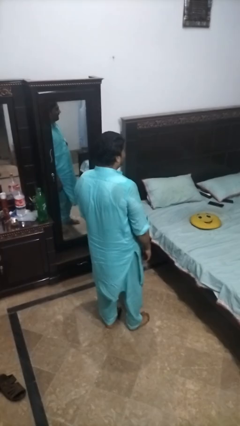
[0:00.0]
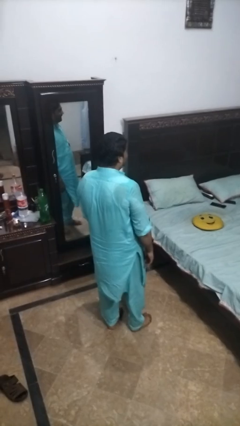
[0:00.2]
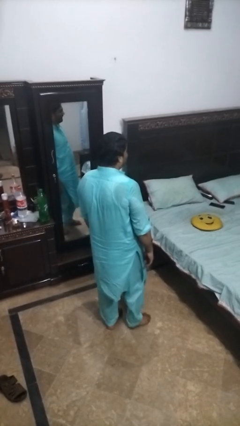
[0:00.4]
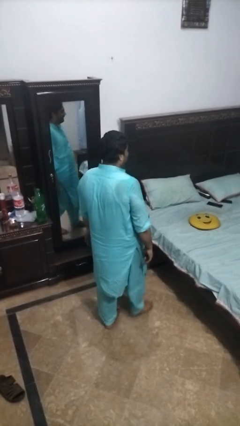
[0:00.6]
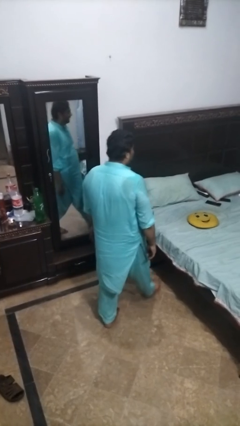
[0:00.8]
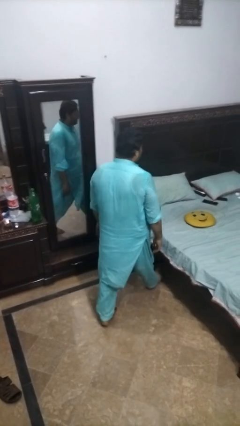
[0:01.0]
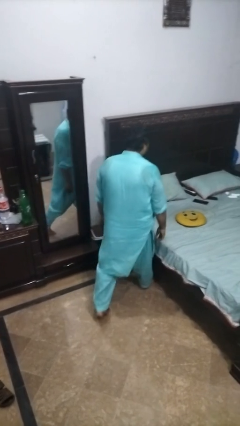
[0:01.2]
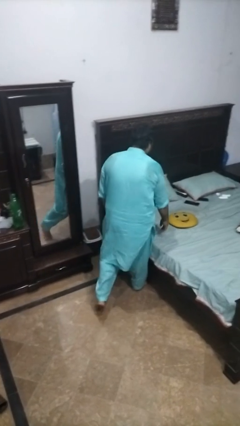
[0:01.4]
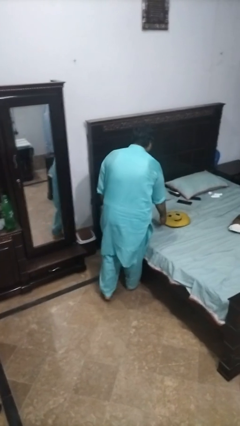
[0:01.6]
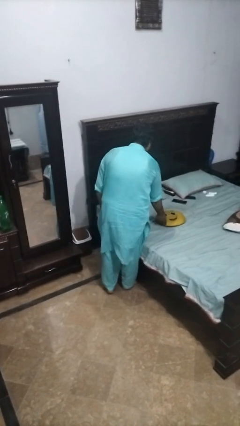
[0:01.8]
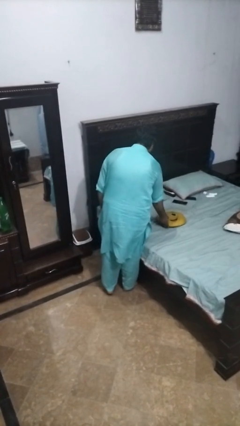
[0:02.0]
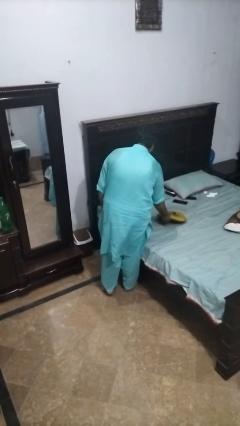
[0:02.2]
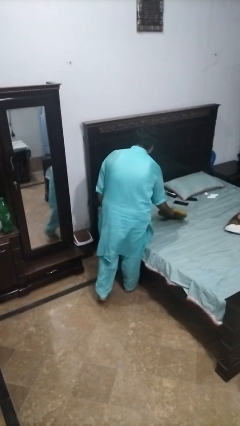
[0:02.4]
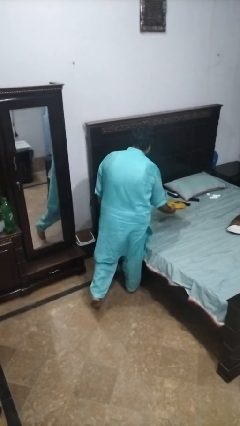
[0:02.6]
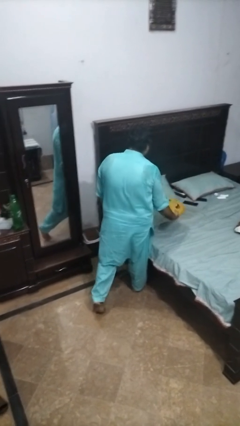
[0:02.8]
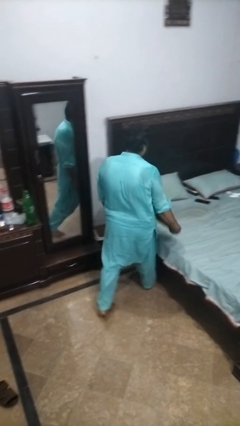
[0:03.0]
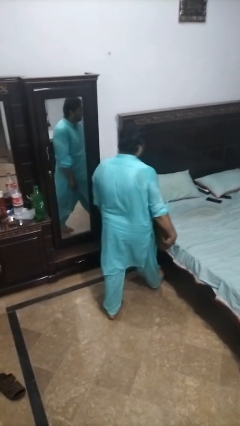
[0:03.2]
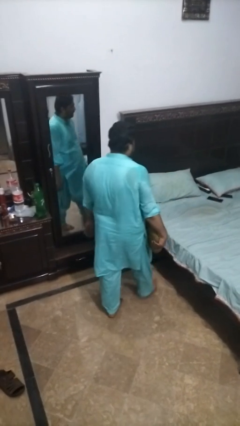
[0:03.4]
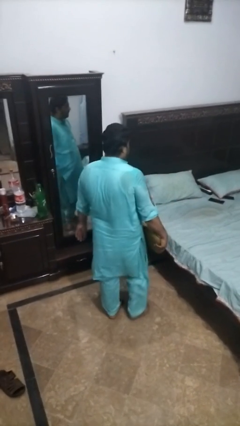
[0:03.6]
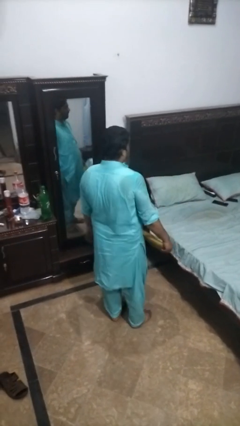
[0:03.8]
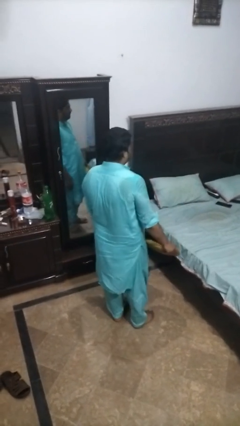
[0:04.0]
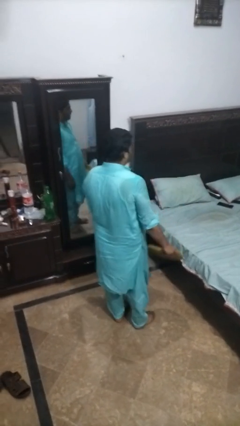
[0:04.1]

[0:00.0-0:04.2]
person picks up object from bed

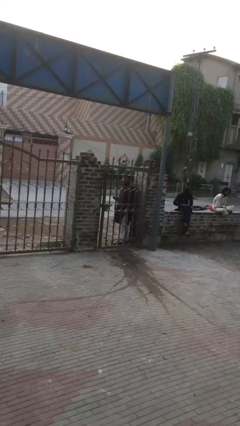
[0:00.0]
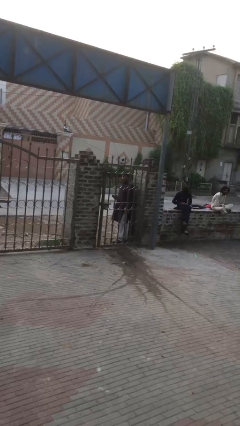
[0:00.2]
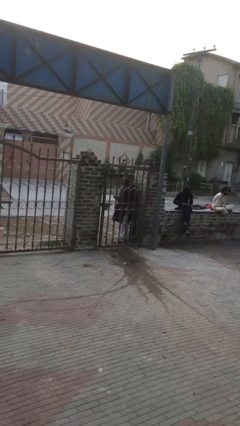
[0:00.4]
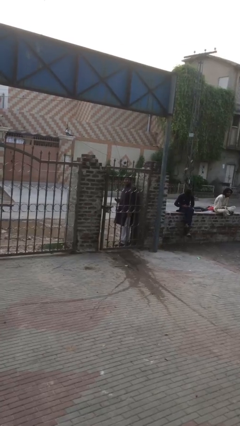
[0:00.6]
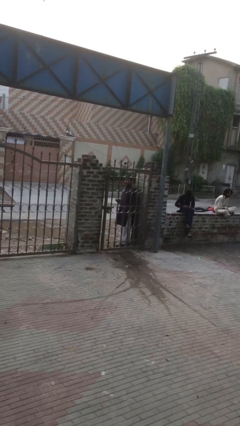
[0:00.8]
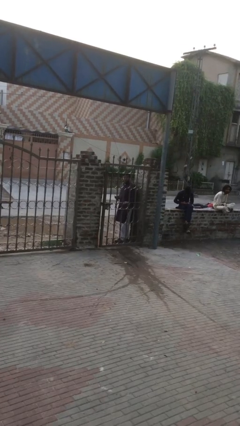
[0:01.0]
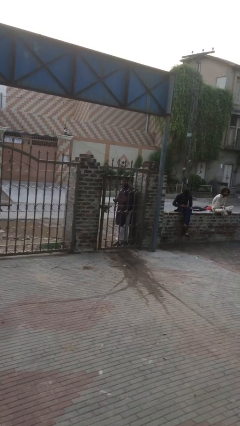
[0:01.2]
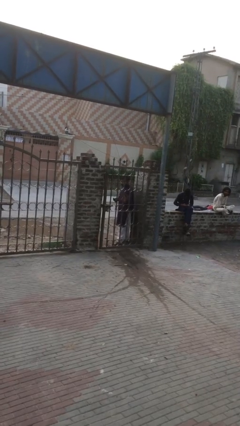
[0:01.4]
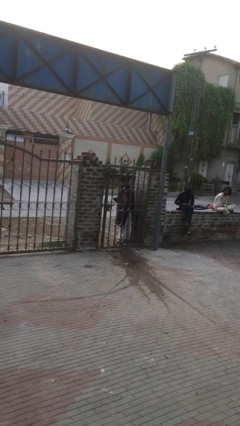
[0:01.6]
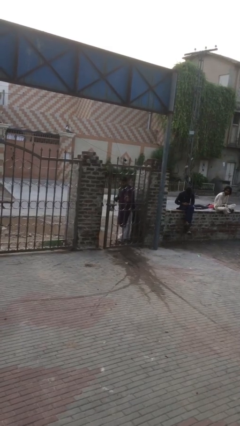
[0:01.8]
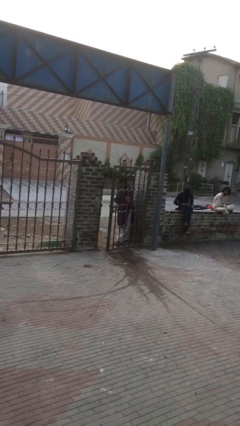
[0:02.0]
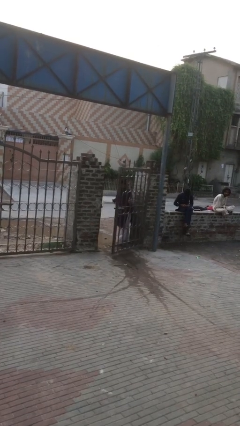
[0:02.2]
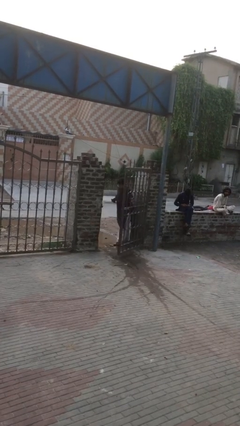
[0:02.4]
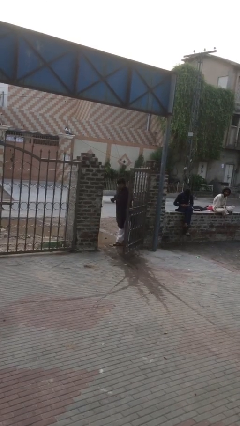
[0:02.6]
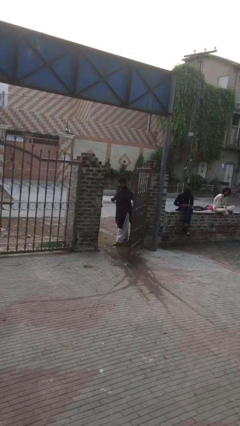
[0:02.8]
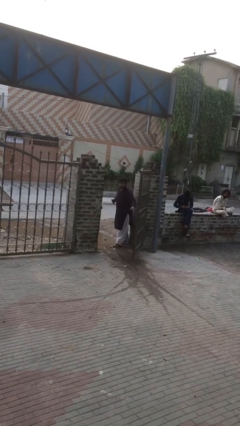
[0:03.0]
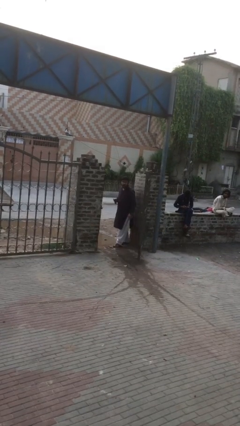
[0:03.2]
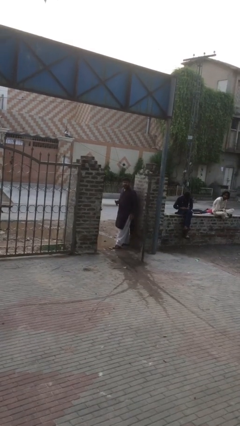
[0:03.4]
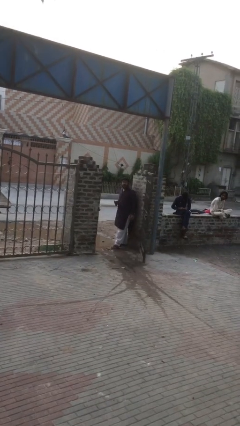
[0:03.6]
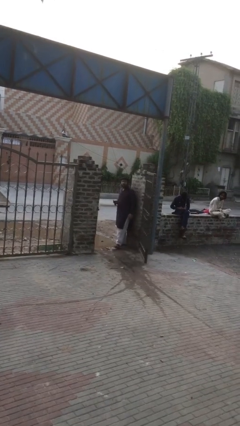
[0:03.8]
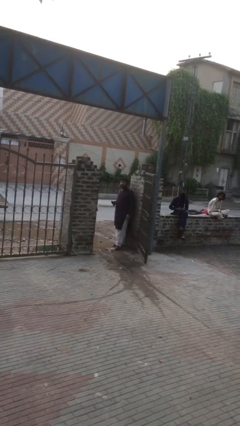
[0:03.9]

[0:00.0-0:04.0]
person opens facility door

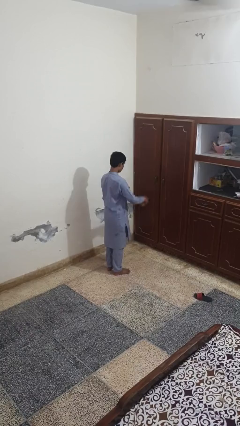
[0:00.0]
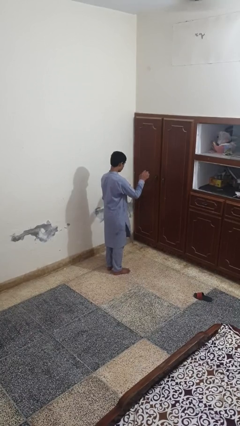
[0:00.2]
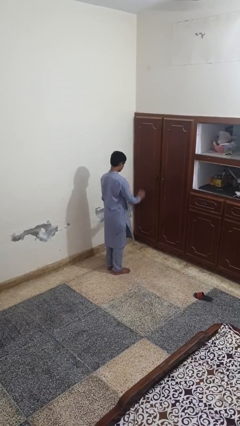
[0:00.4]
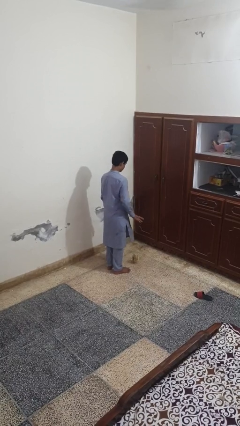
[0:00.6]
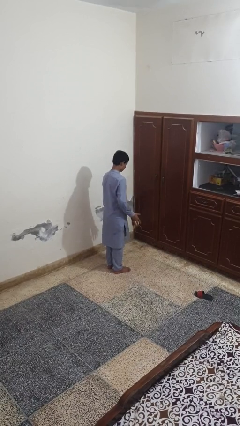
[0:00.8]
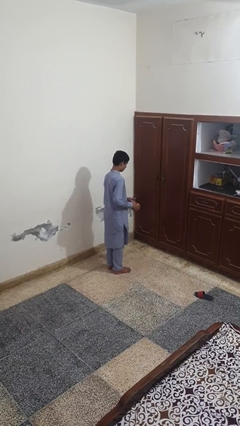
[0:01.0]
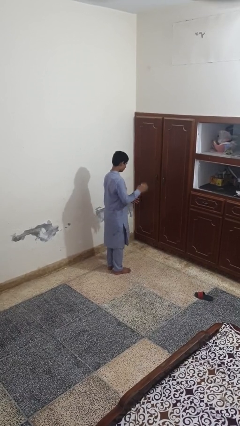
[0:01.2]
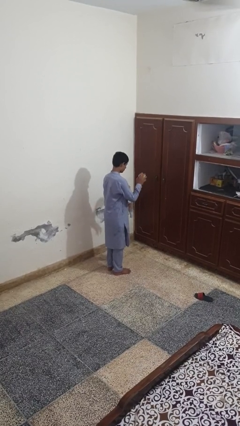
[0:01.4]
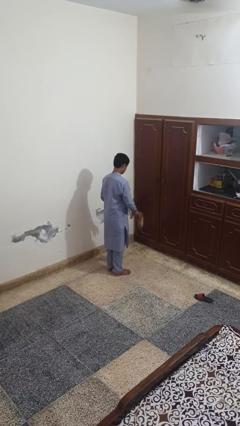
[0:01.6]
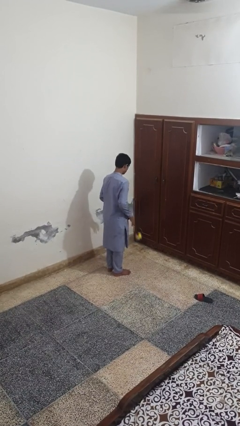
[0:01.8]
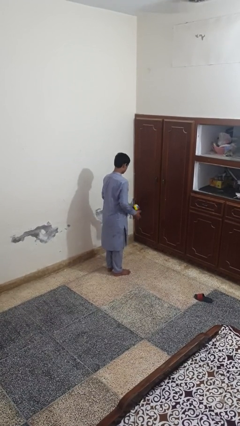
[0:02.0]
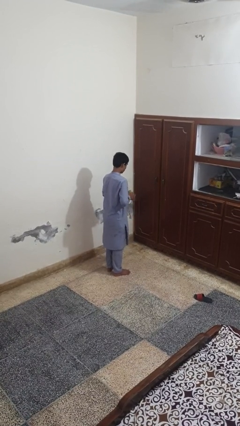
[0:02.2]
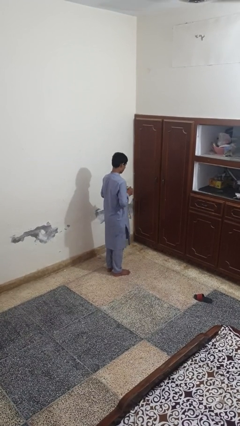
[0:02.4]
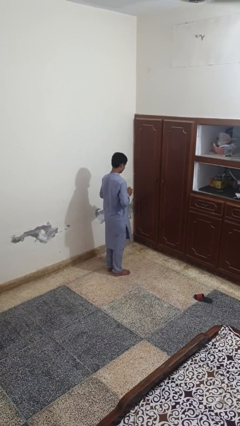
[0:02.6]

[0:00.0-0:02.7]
person bounces ball on floor

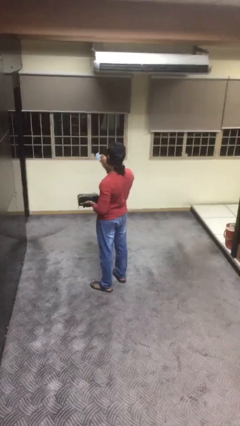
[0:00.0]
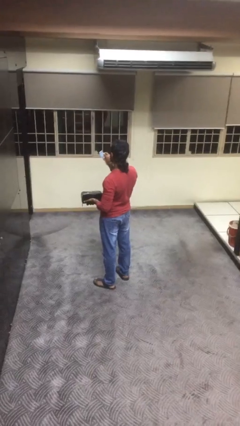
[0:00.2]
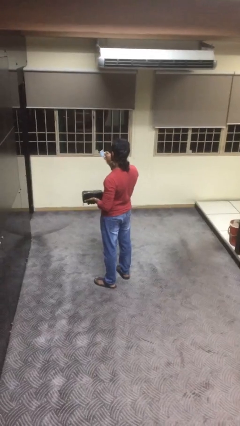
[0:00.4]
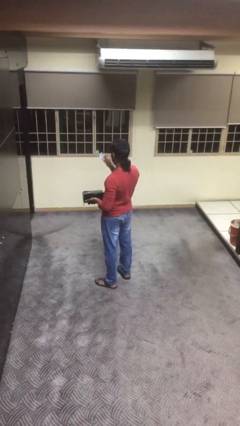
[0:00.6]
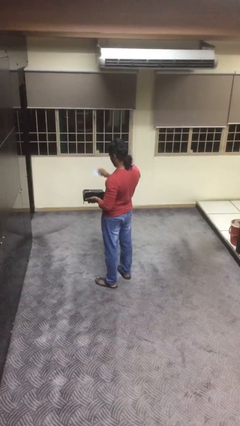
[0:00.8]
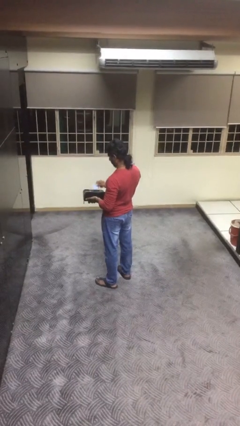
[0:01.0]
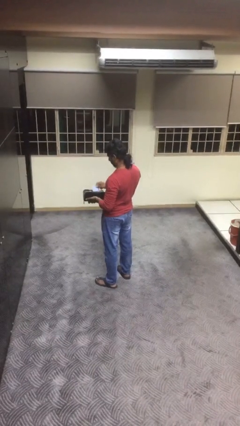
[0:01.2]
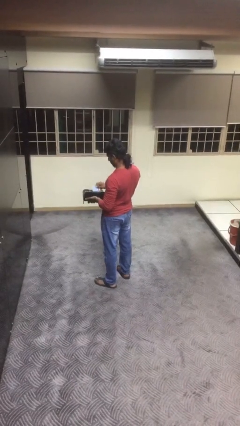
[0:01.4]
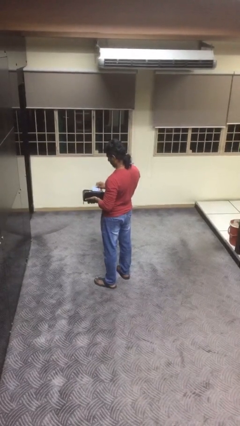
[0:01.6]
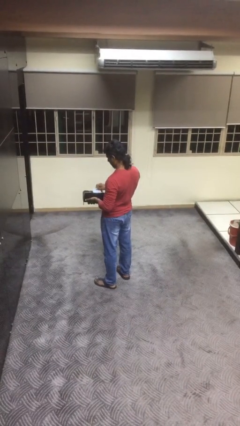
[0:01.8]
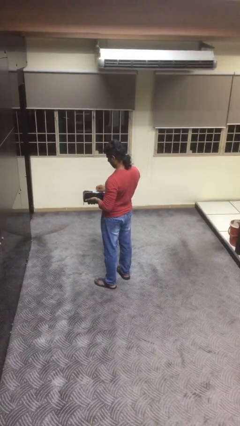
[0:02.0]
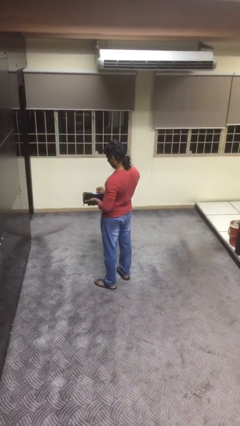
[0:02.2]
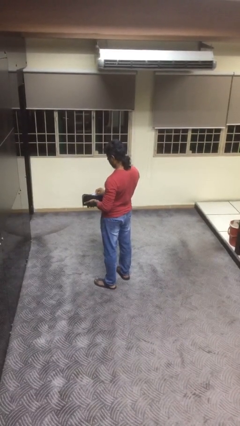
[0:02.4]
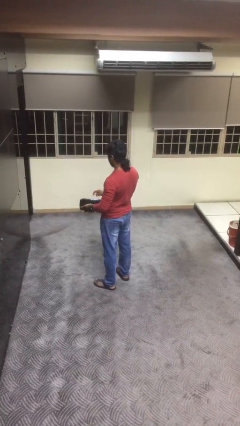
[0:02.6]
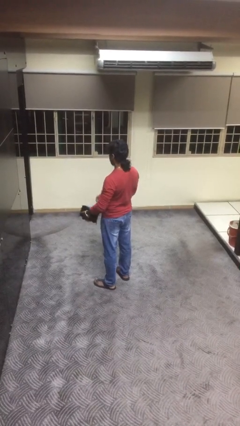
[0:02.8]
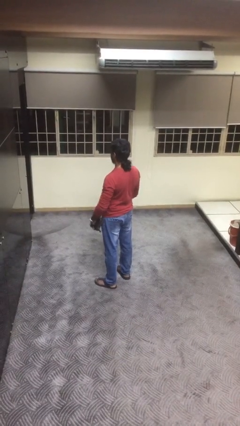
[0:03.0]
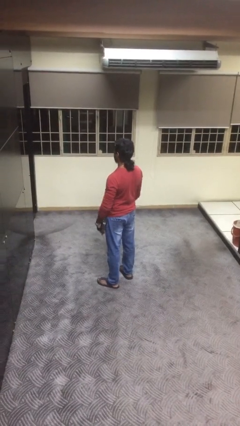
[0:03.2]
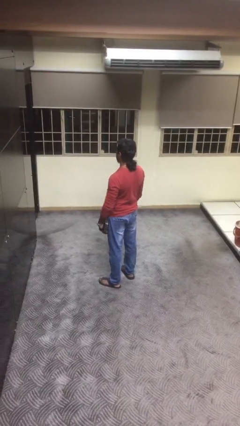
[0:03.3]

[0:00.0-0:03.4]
person puts object into purse

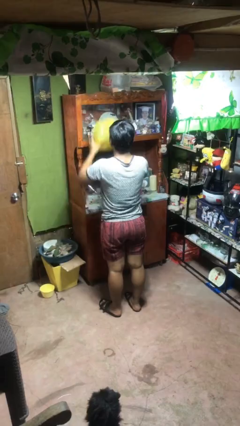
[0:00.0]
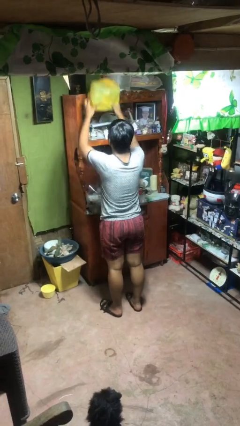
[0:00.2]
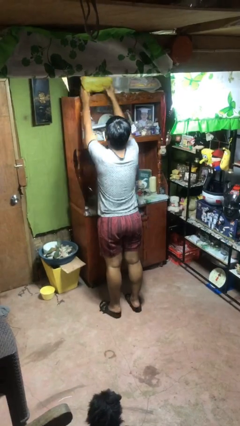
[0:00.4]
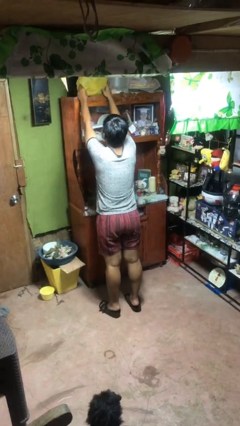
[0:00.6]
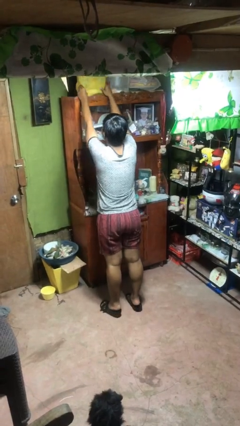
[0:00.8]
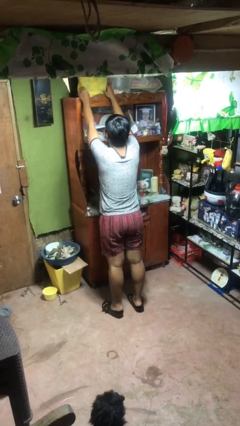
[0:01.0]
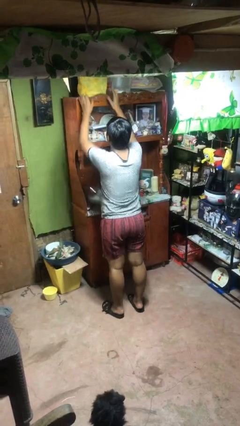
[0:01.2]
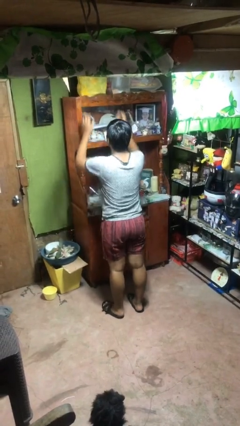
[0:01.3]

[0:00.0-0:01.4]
person puts down object on shelf

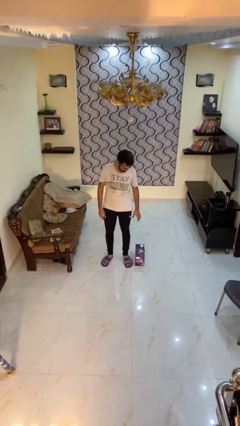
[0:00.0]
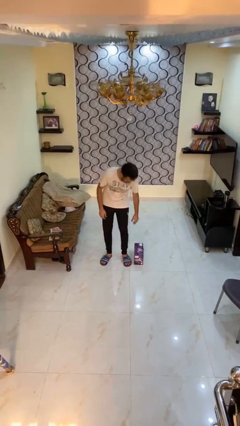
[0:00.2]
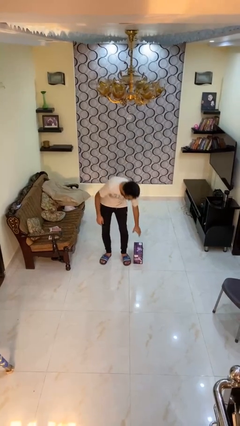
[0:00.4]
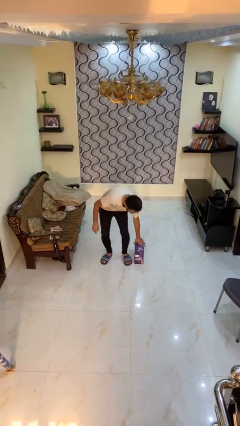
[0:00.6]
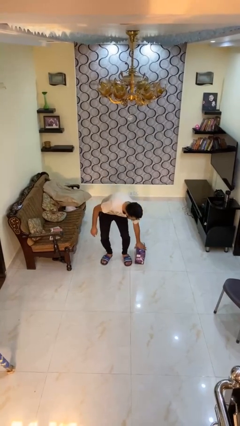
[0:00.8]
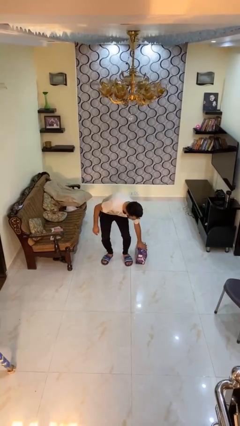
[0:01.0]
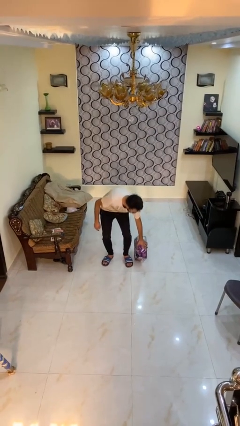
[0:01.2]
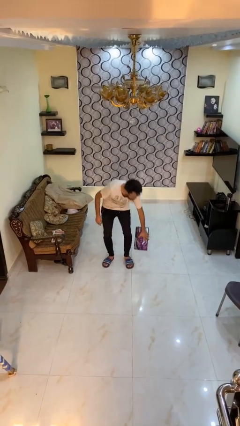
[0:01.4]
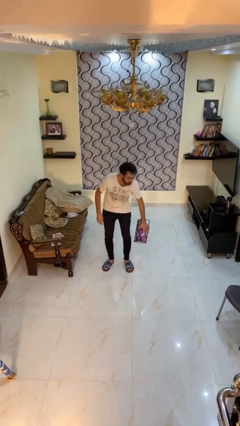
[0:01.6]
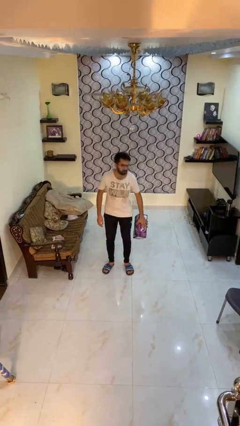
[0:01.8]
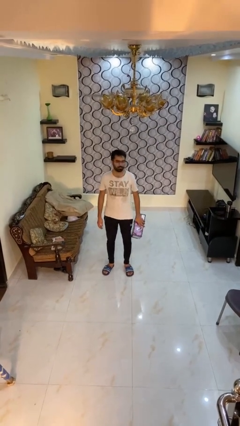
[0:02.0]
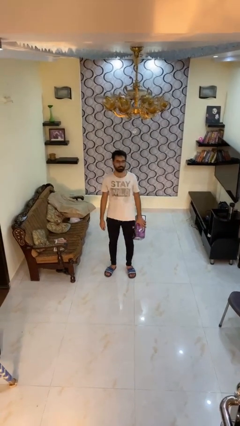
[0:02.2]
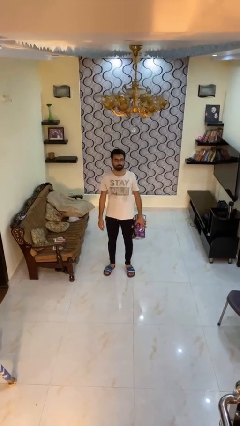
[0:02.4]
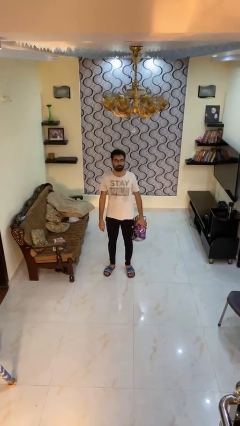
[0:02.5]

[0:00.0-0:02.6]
person picks up object from floor
